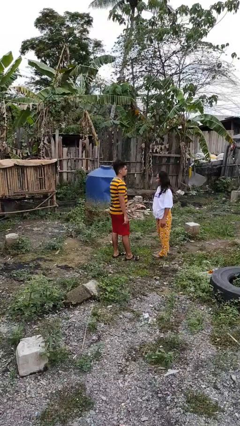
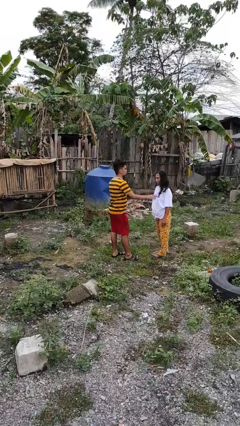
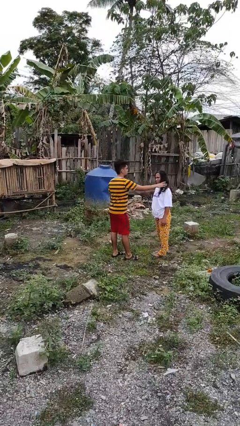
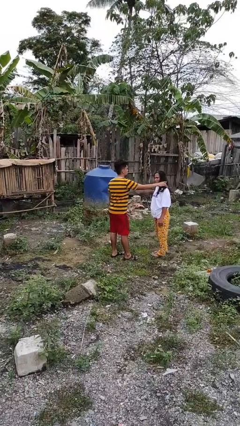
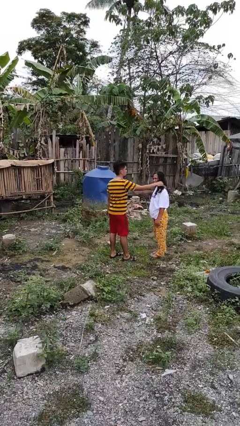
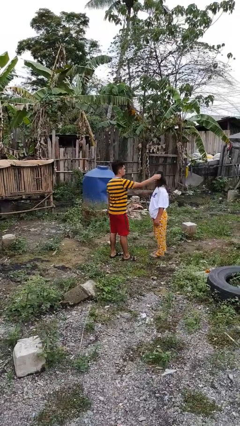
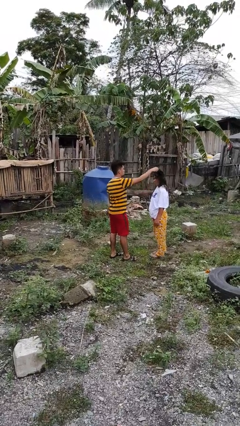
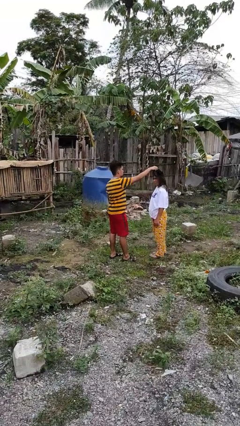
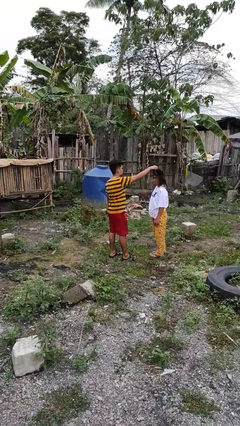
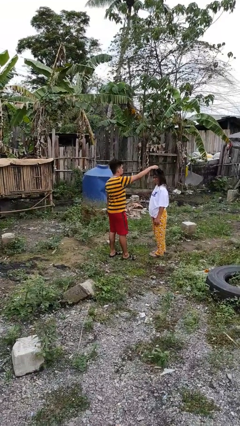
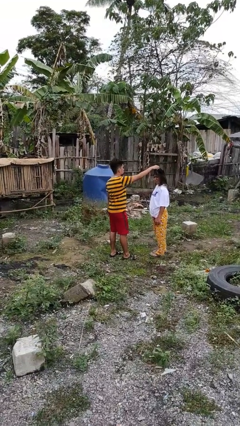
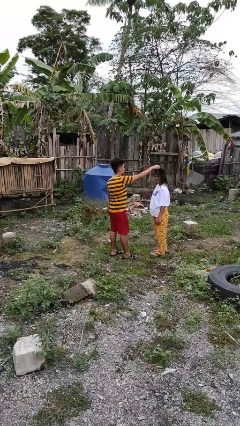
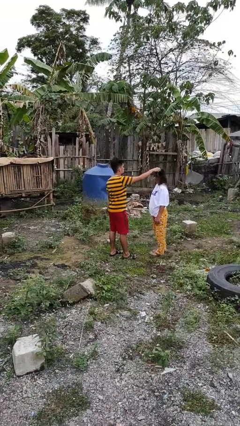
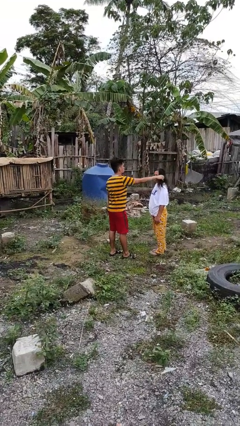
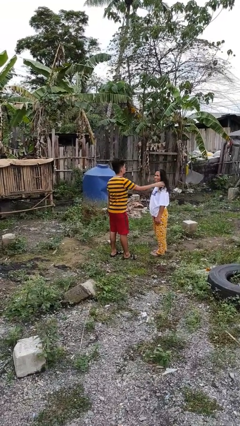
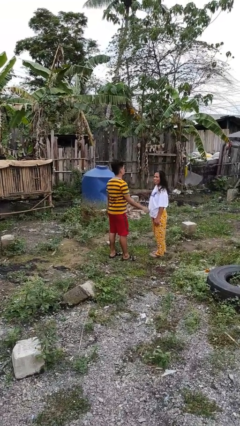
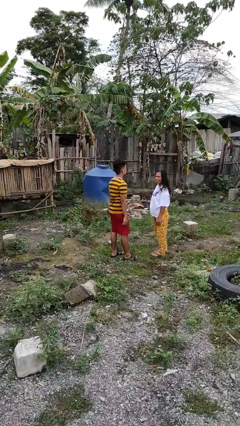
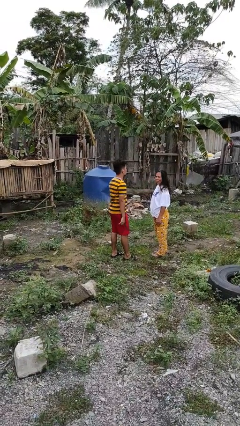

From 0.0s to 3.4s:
person grabs person by hair

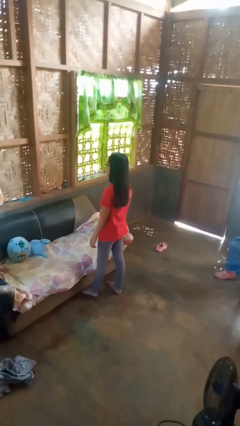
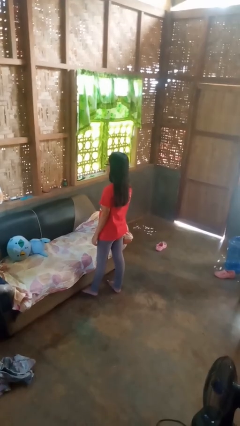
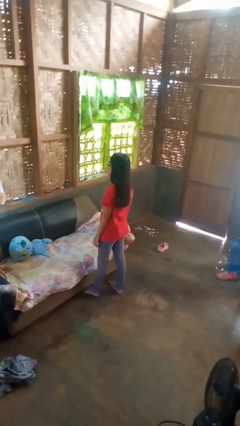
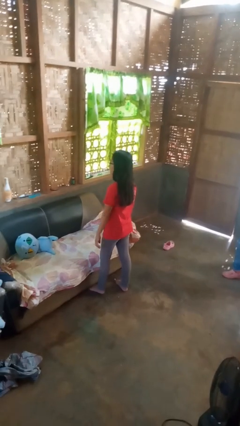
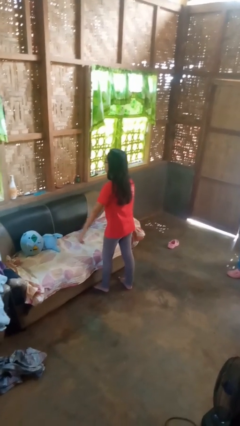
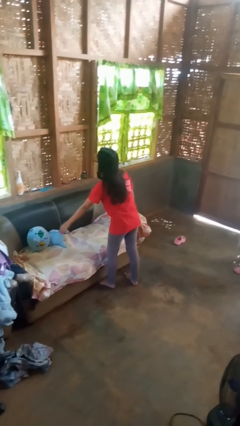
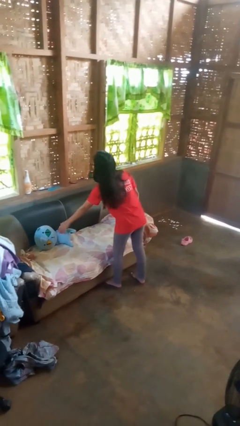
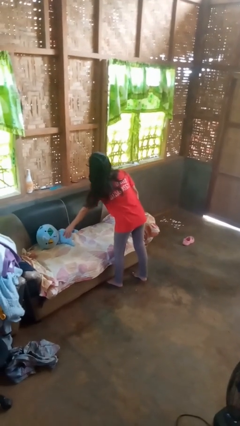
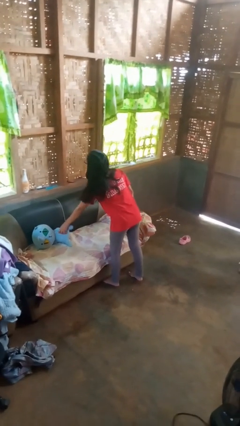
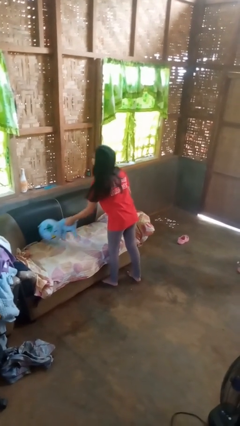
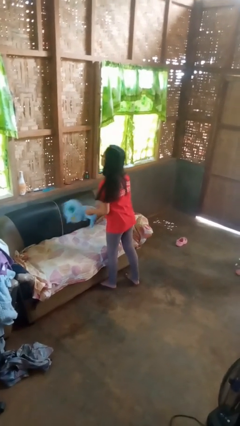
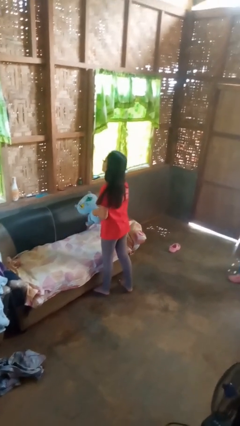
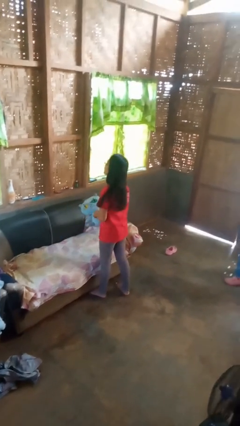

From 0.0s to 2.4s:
person picks up object from couch

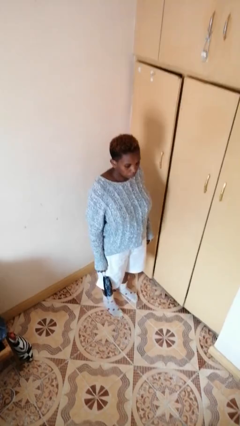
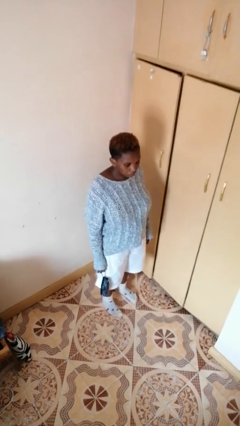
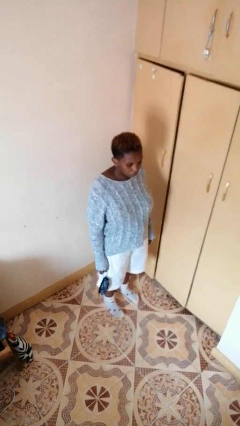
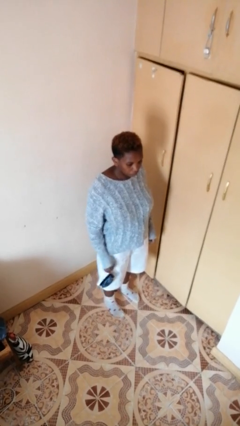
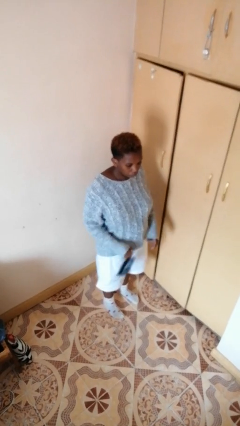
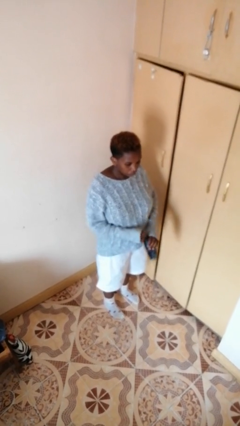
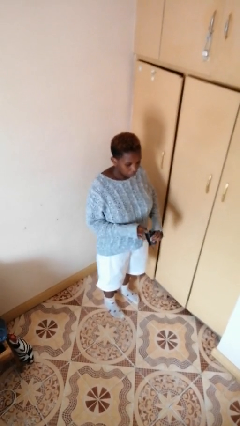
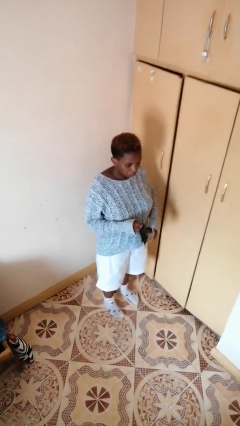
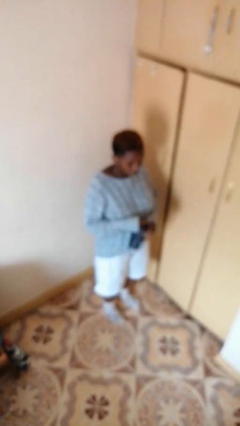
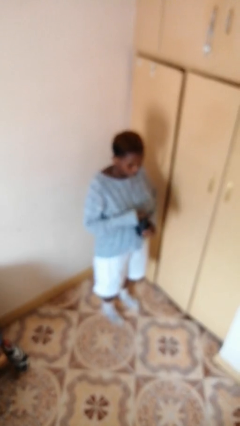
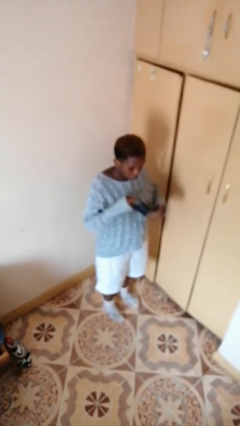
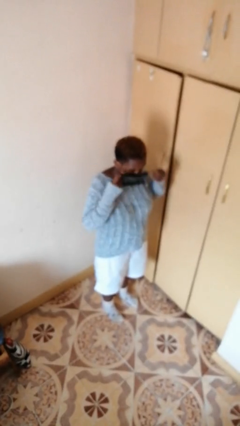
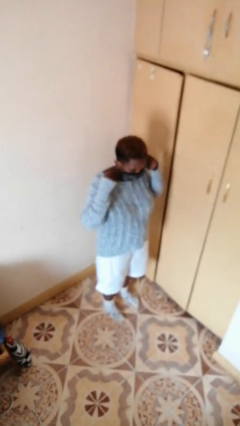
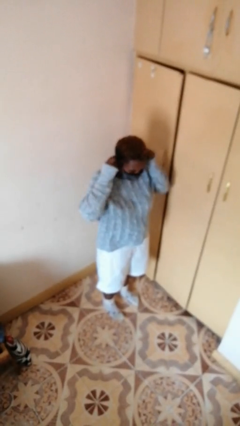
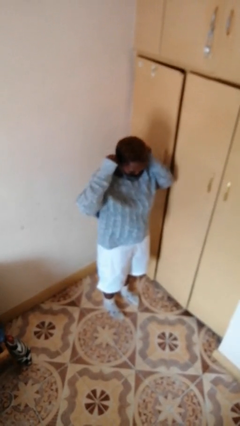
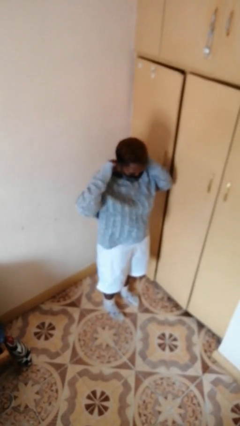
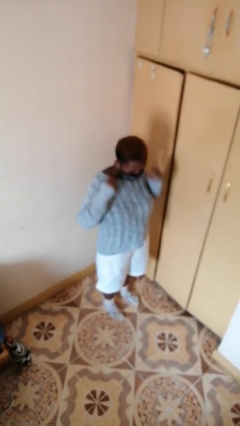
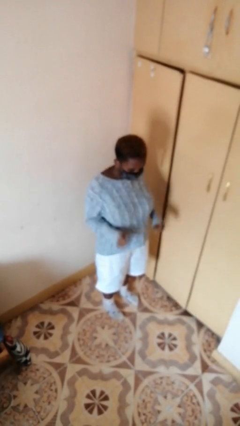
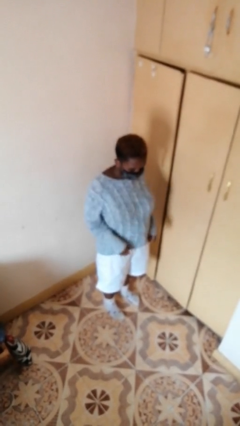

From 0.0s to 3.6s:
person puts on facemask

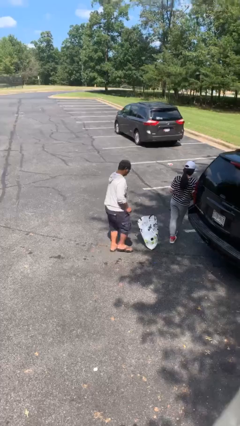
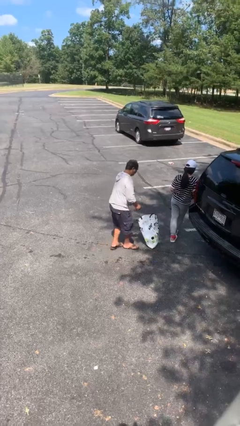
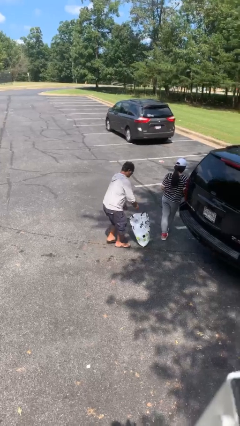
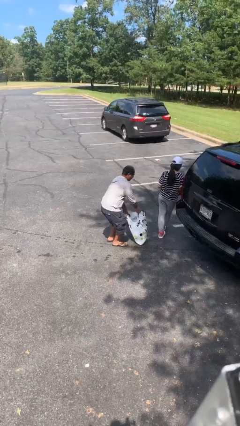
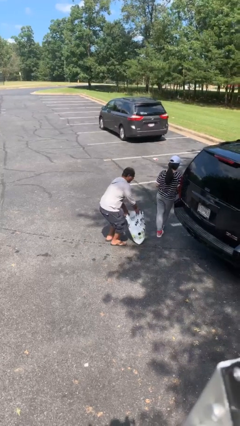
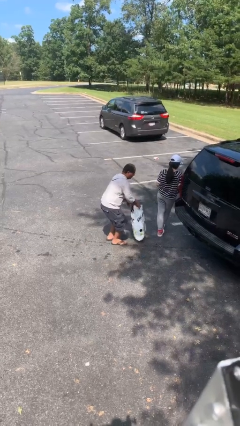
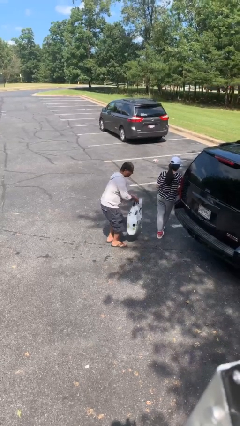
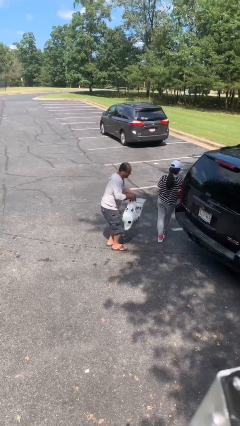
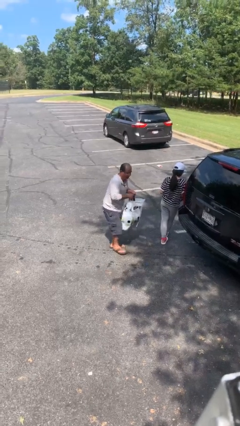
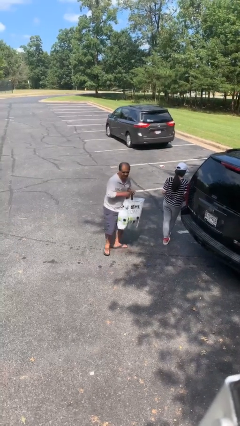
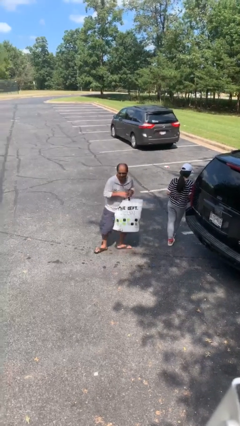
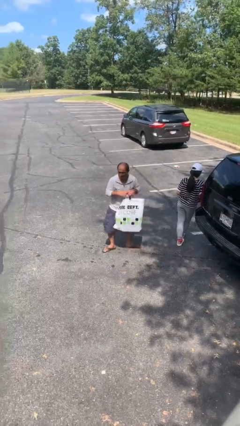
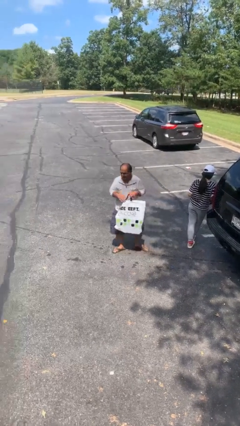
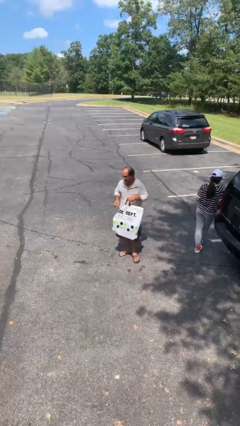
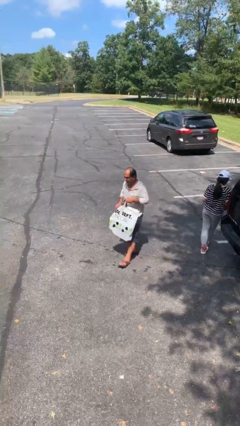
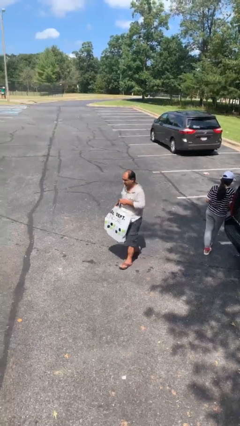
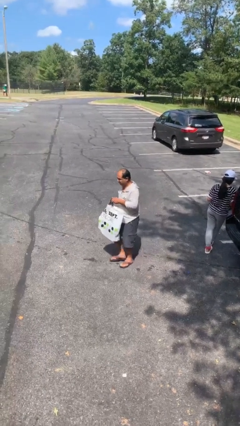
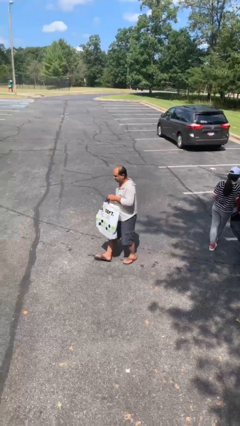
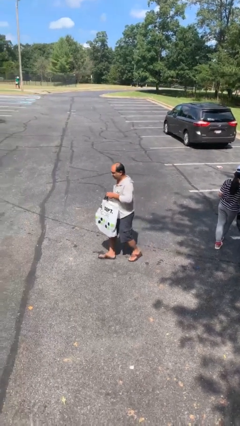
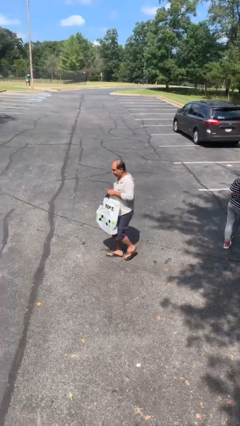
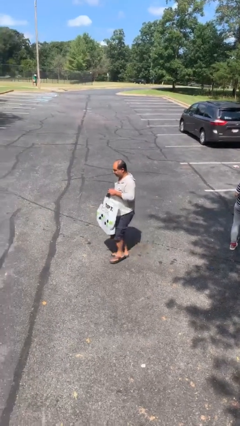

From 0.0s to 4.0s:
person steals object from person

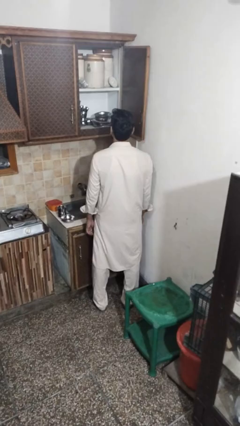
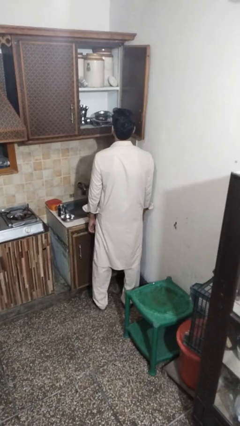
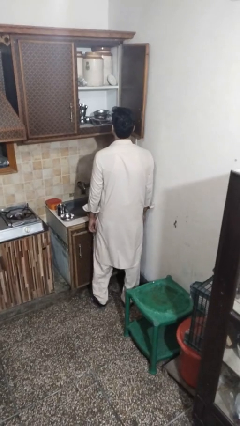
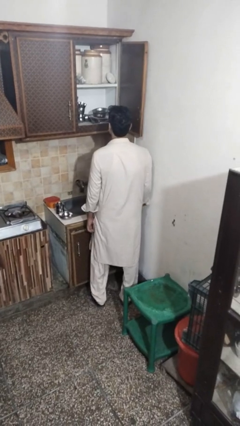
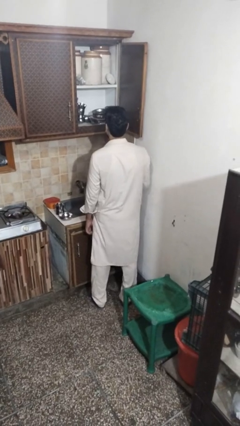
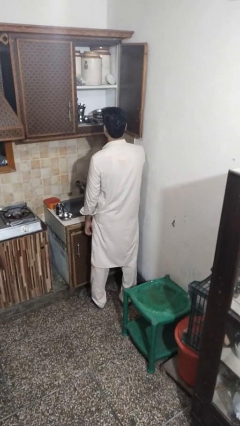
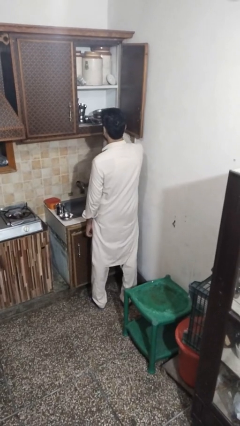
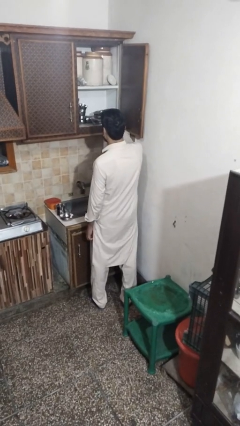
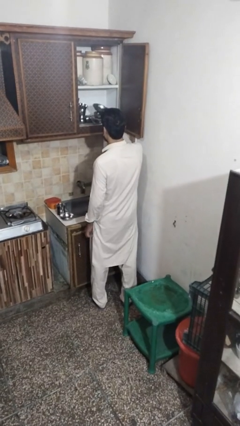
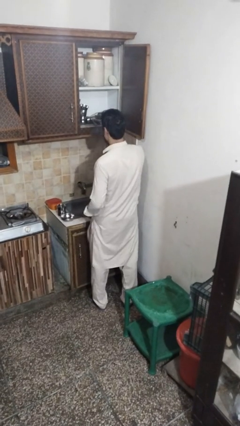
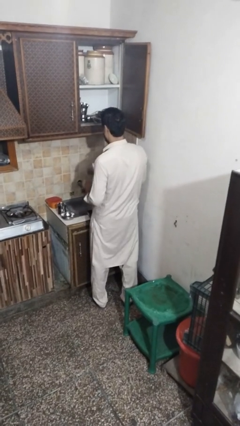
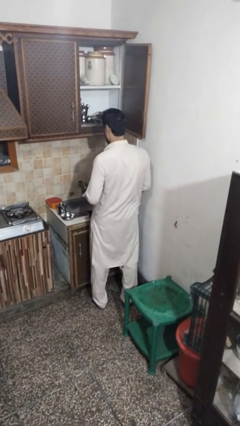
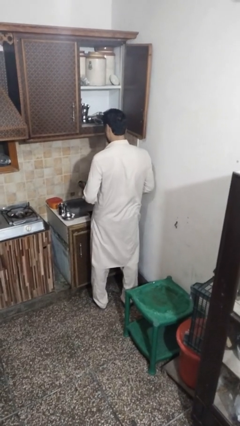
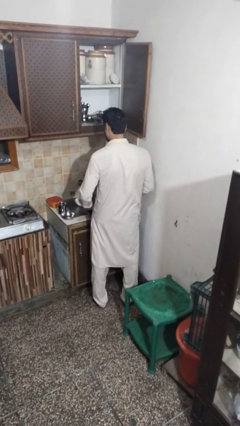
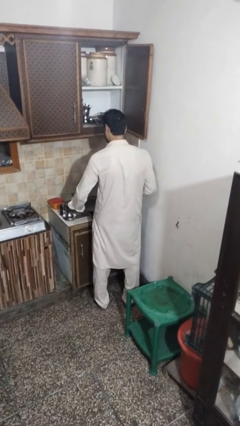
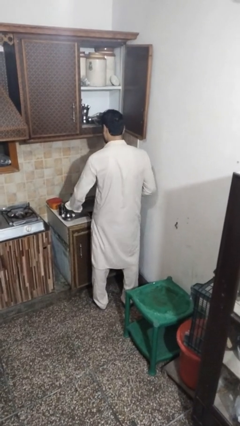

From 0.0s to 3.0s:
person takes object from cabinet

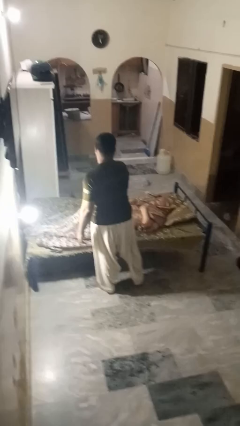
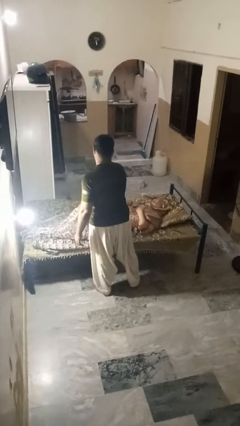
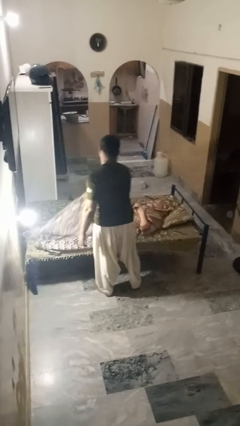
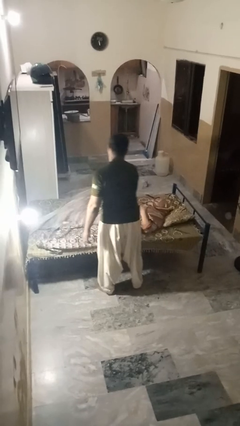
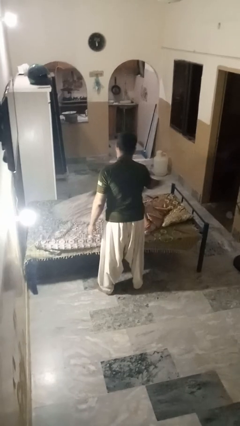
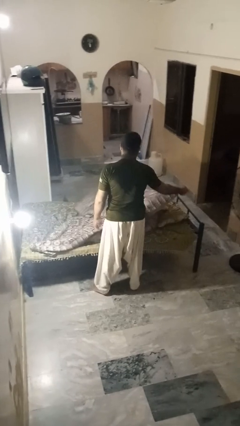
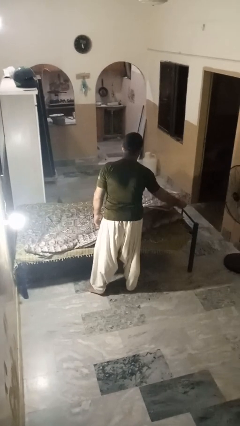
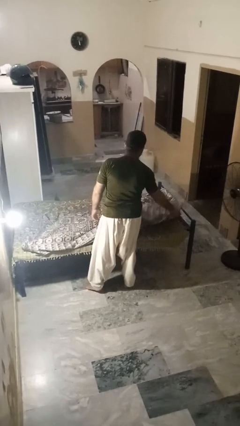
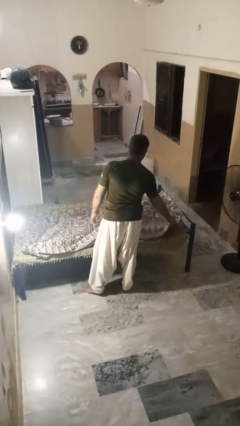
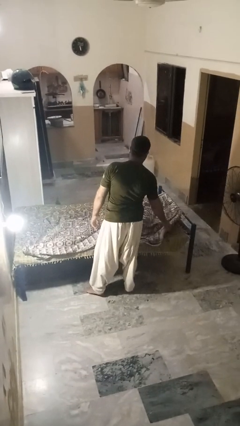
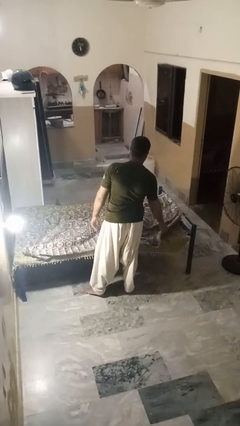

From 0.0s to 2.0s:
person covers friend with blanket
